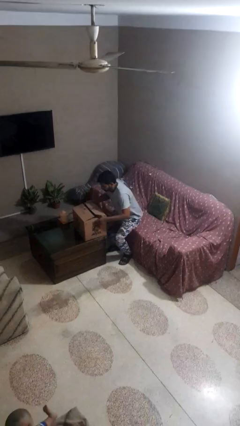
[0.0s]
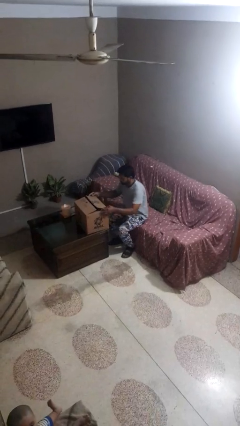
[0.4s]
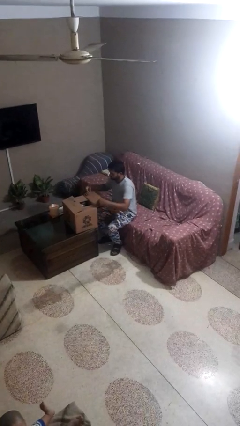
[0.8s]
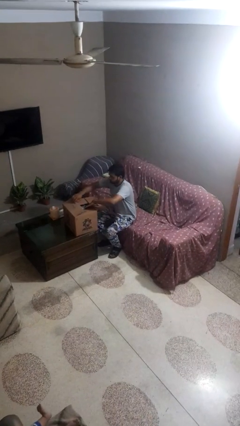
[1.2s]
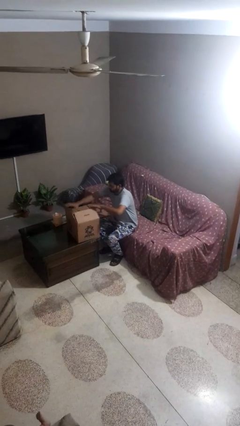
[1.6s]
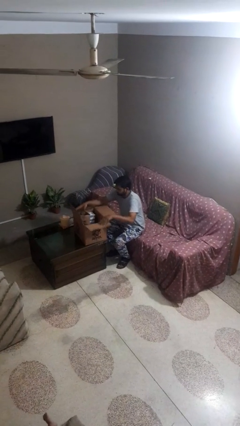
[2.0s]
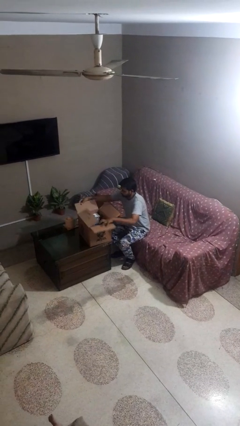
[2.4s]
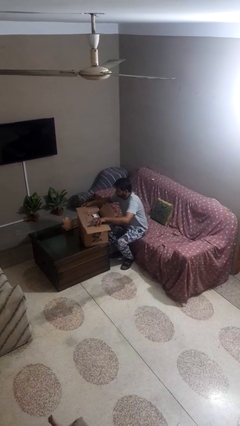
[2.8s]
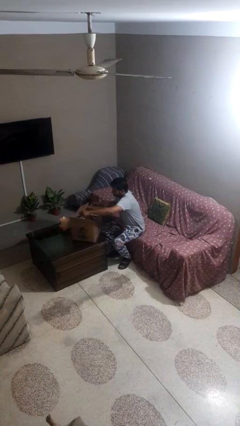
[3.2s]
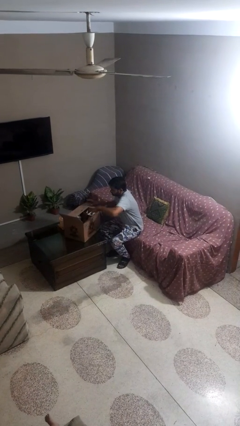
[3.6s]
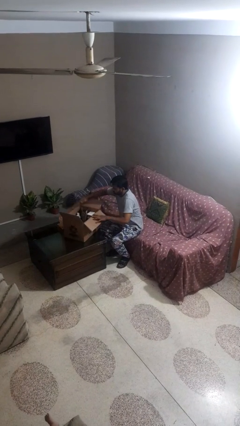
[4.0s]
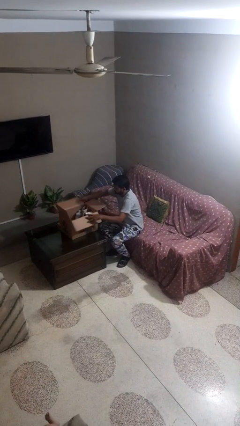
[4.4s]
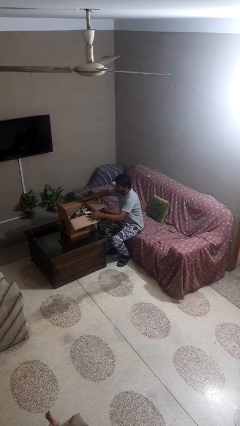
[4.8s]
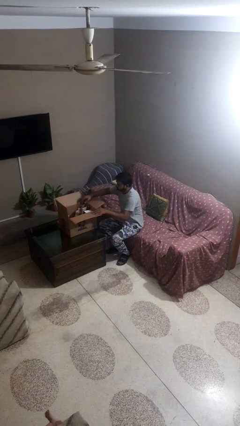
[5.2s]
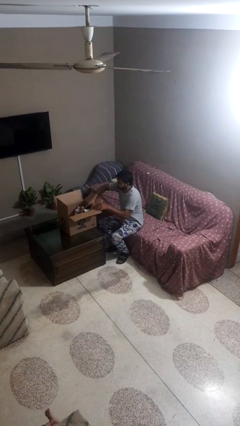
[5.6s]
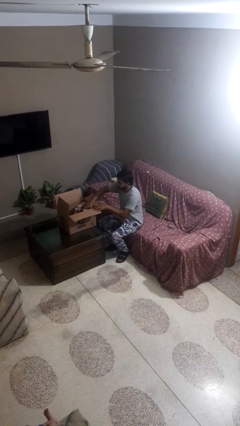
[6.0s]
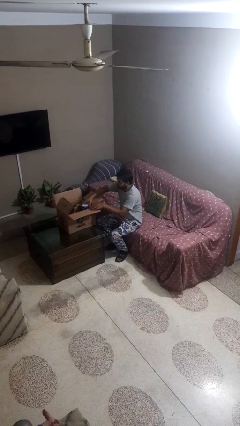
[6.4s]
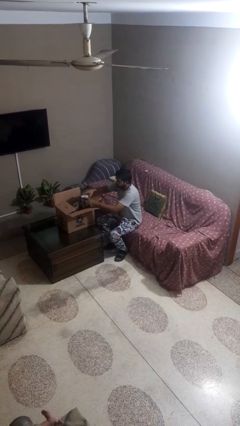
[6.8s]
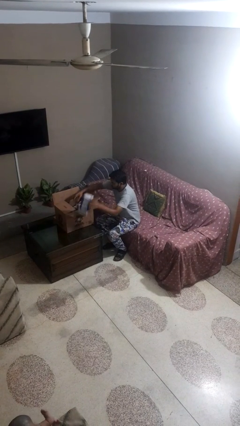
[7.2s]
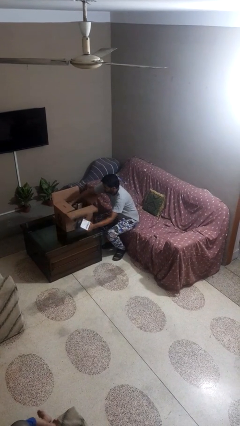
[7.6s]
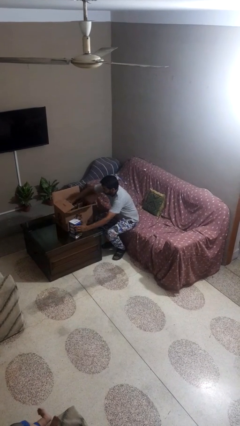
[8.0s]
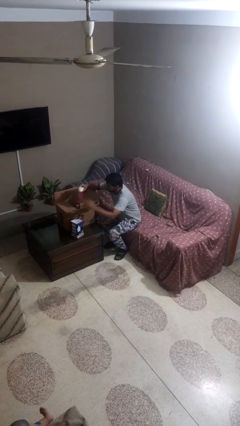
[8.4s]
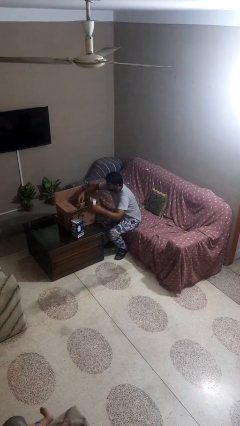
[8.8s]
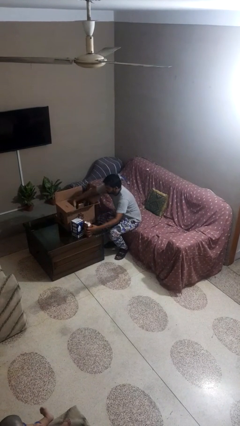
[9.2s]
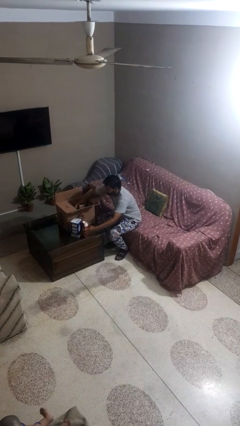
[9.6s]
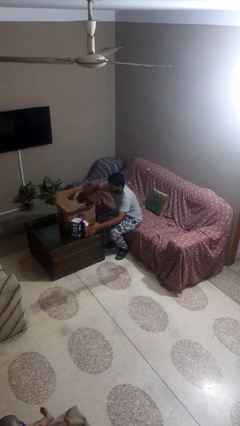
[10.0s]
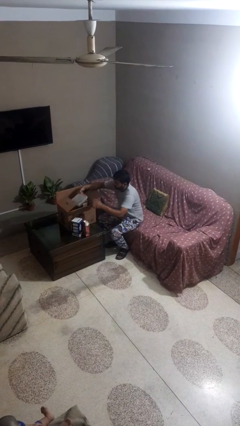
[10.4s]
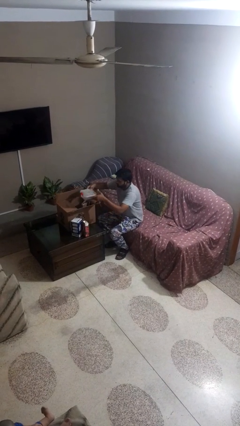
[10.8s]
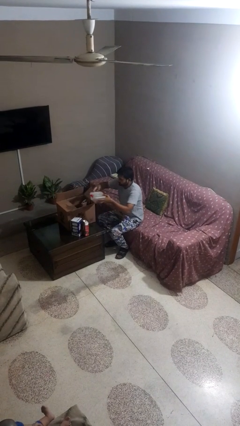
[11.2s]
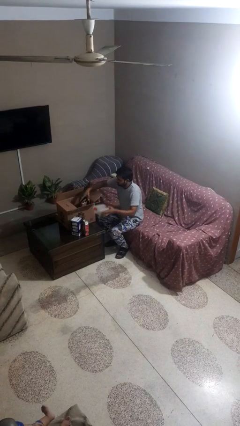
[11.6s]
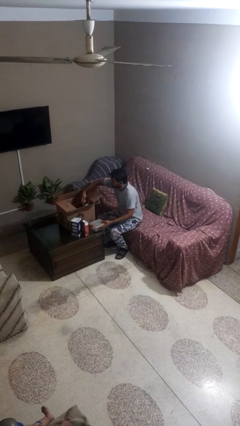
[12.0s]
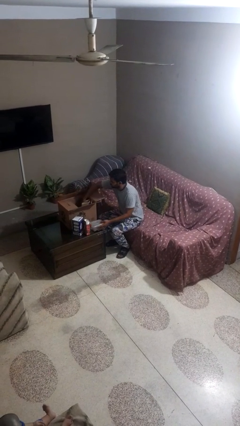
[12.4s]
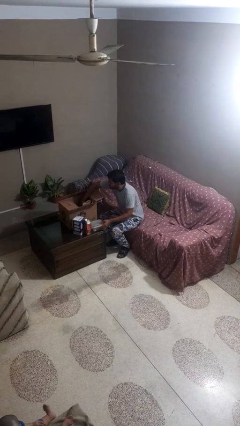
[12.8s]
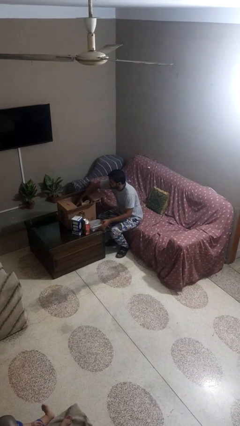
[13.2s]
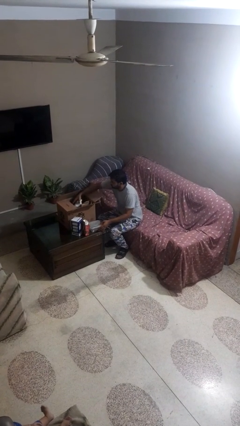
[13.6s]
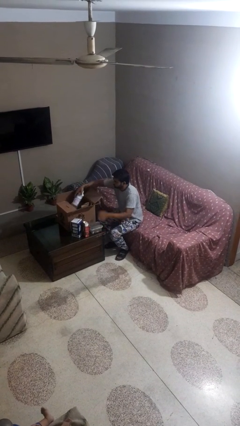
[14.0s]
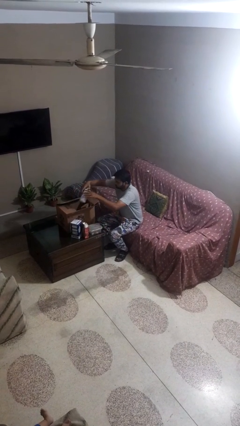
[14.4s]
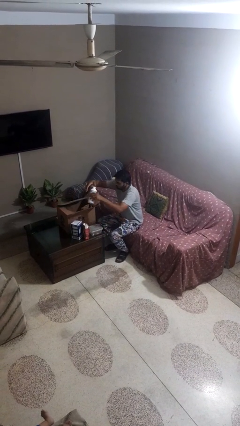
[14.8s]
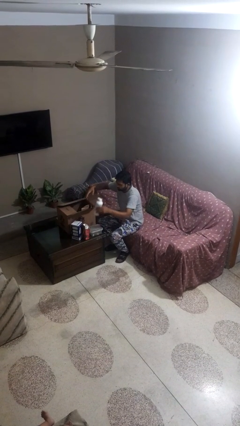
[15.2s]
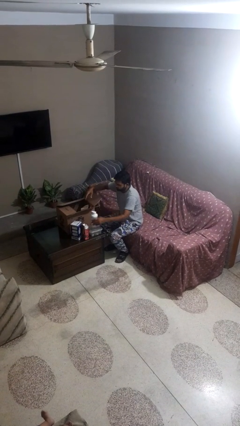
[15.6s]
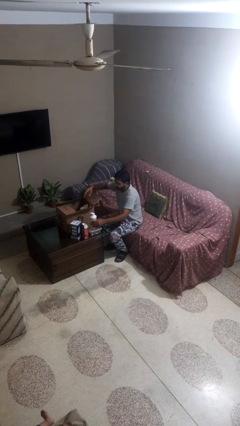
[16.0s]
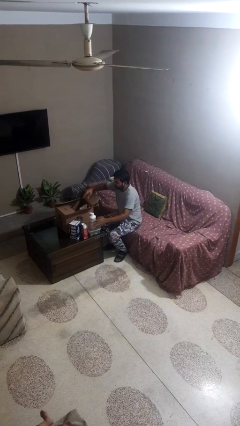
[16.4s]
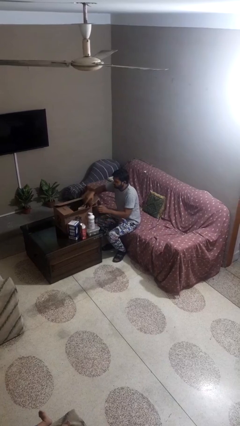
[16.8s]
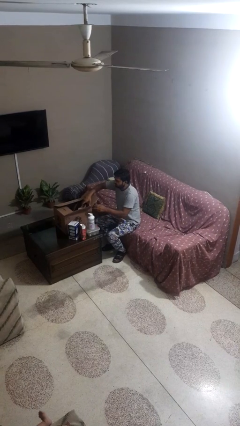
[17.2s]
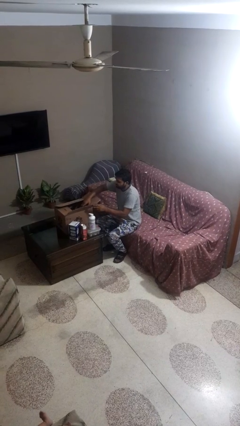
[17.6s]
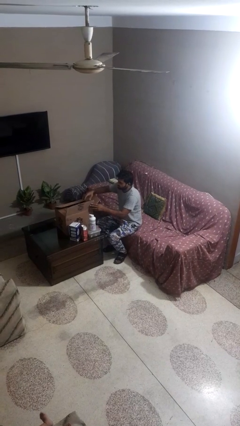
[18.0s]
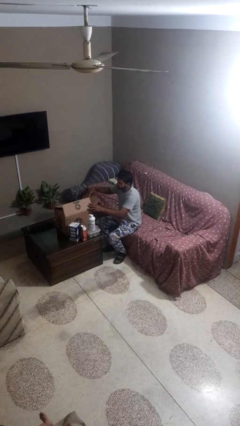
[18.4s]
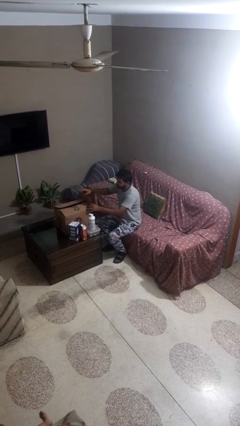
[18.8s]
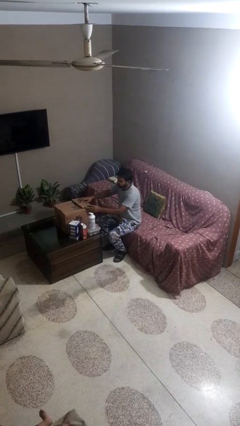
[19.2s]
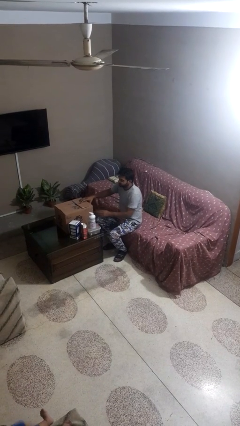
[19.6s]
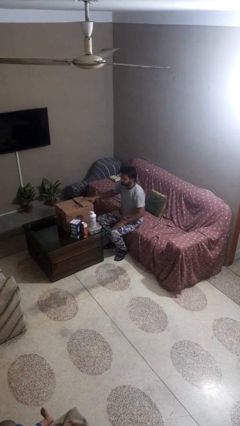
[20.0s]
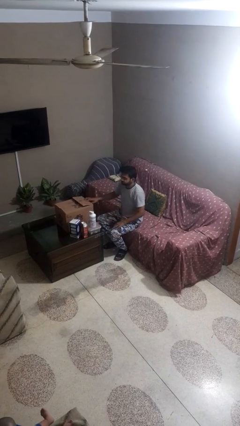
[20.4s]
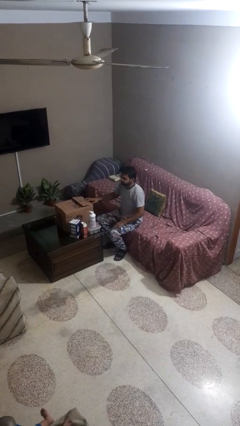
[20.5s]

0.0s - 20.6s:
person unloads box onto table

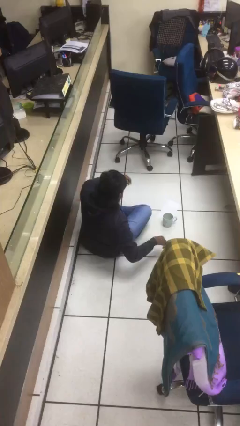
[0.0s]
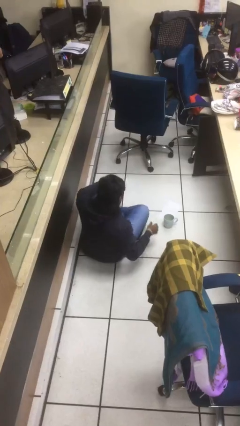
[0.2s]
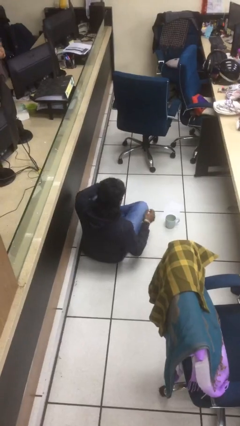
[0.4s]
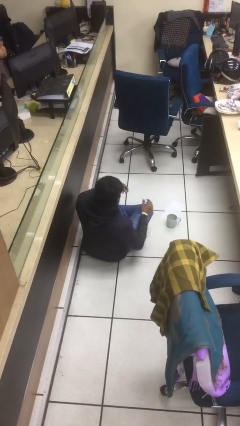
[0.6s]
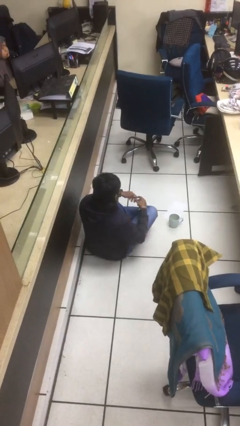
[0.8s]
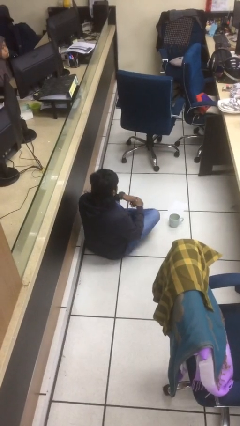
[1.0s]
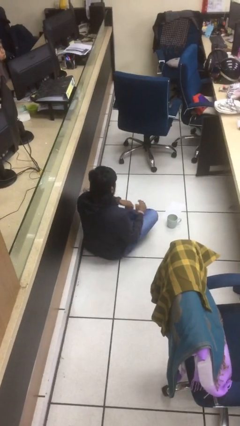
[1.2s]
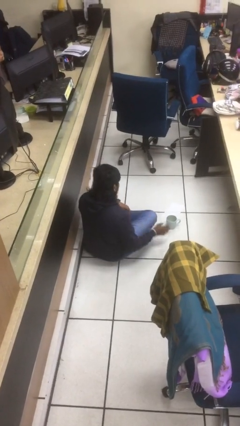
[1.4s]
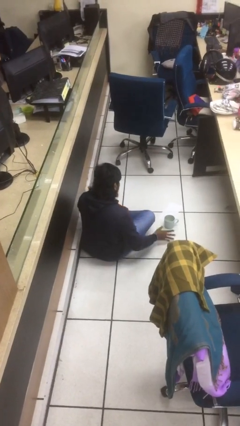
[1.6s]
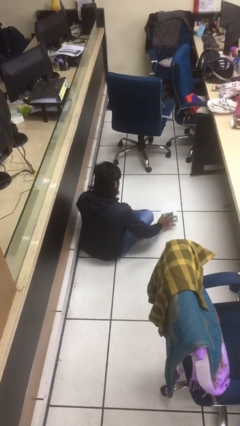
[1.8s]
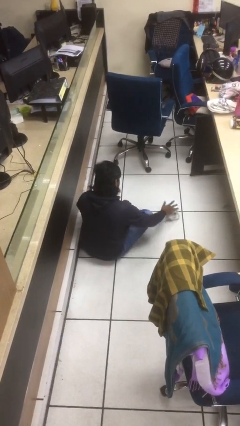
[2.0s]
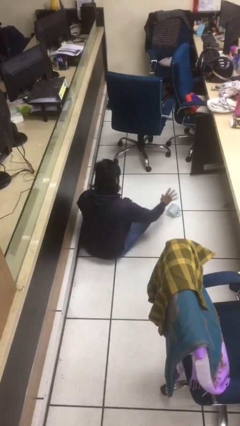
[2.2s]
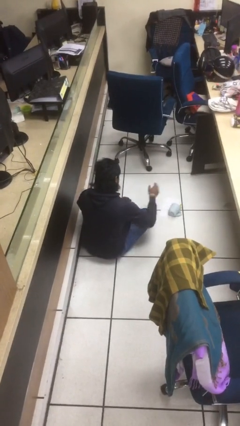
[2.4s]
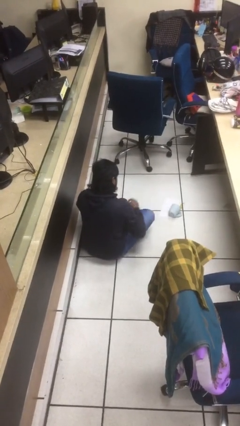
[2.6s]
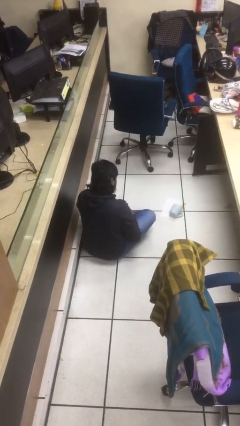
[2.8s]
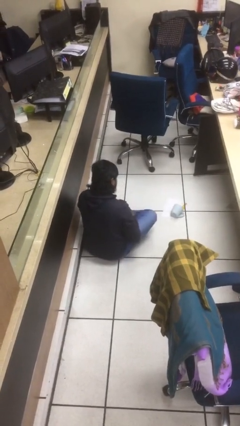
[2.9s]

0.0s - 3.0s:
person spills on floor

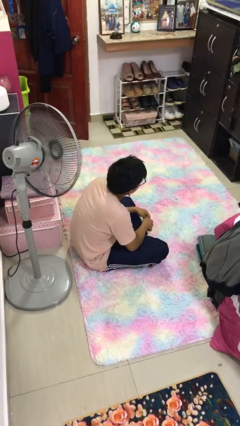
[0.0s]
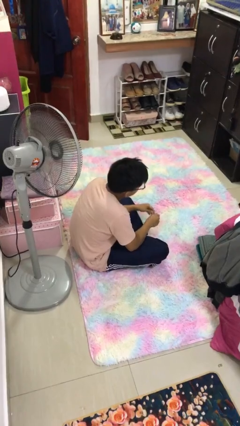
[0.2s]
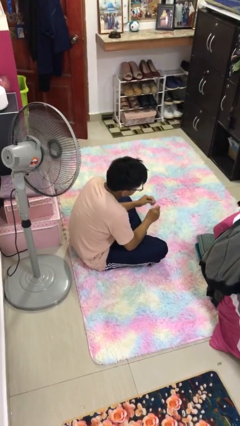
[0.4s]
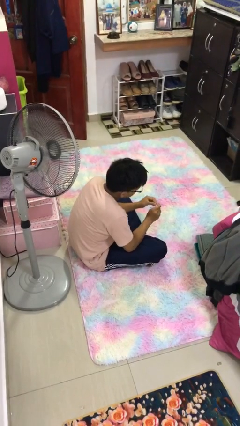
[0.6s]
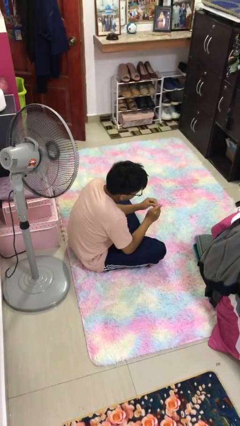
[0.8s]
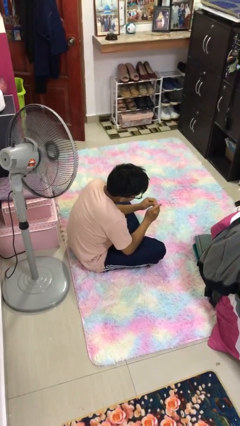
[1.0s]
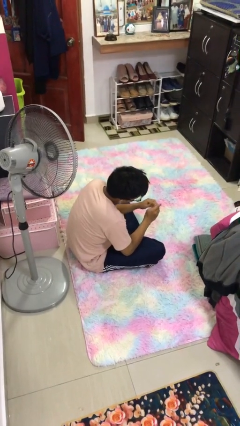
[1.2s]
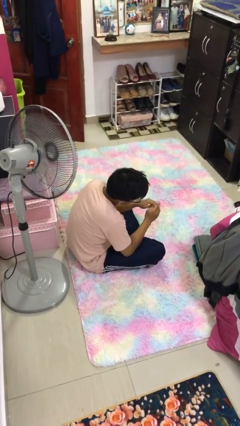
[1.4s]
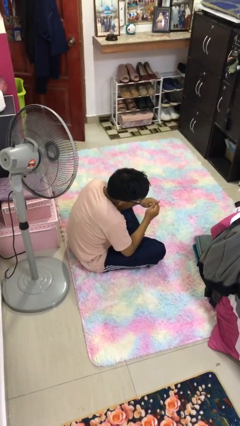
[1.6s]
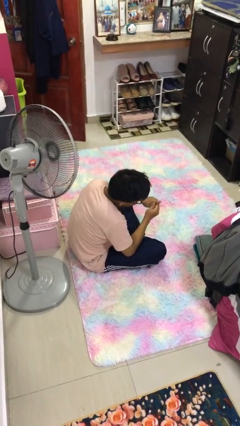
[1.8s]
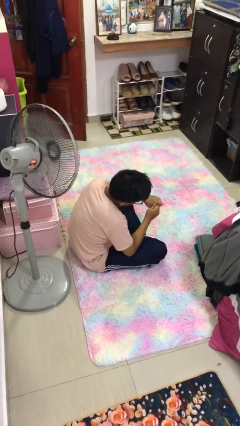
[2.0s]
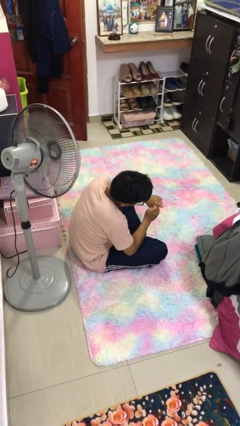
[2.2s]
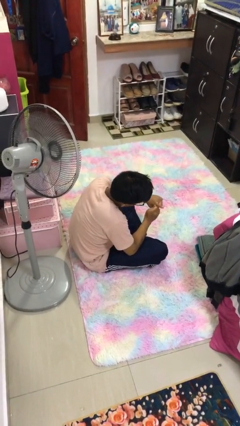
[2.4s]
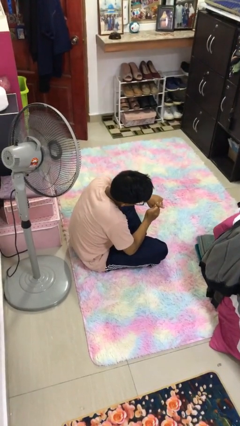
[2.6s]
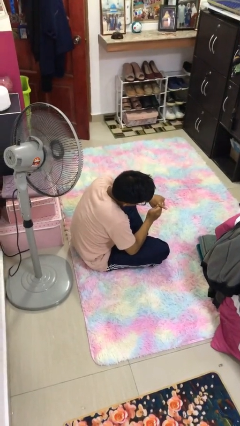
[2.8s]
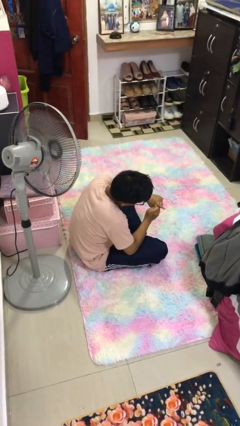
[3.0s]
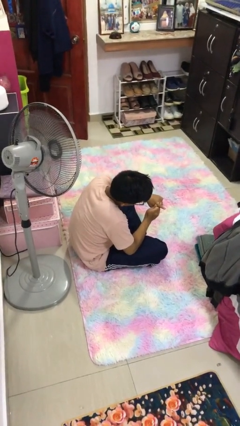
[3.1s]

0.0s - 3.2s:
person puts on ring

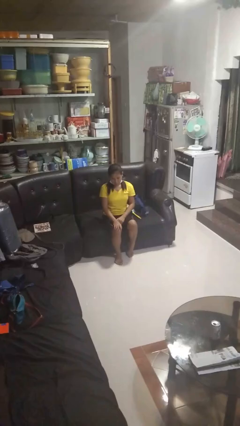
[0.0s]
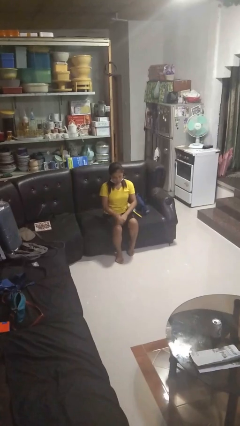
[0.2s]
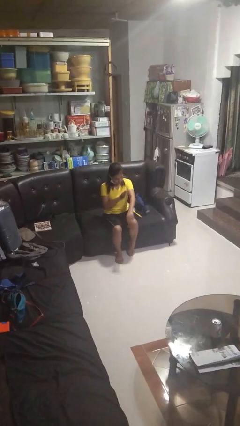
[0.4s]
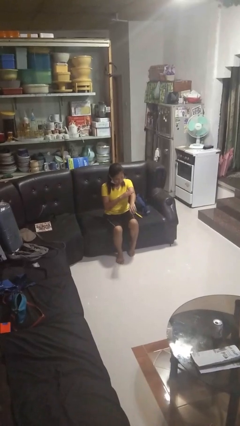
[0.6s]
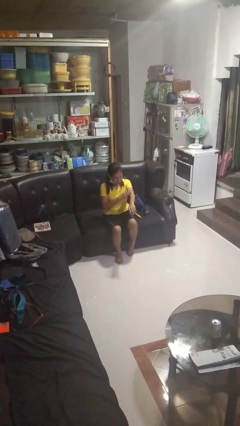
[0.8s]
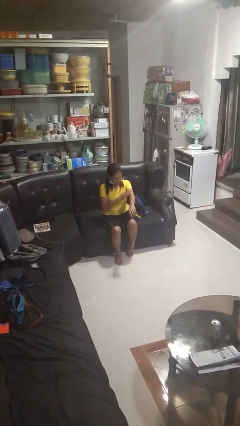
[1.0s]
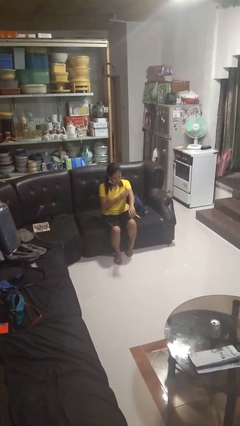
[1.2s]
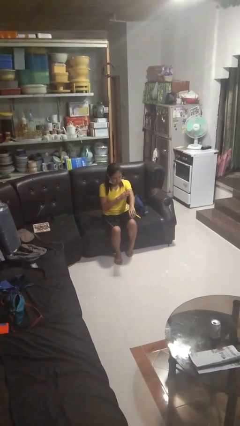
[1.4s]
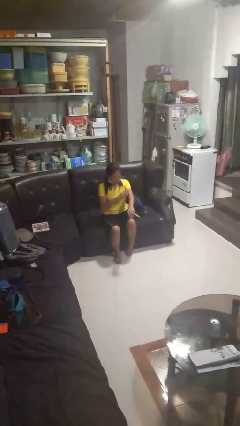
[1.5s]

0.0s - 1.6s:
person swats bug

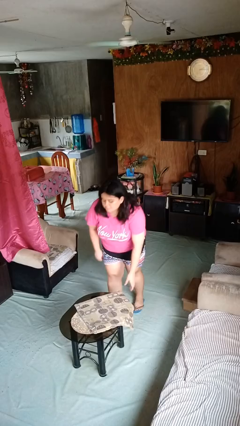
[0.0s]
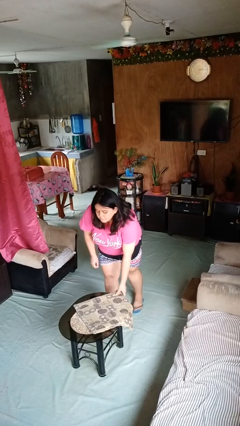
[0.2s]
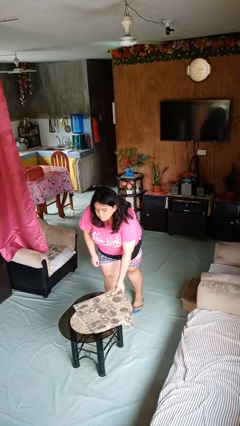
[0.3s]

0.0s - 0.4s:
person picks up object from table
